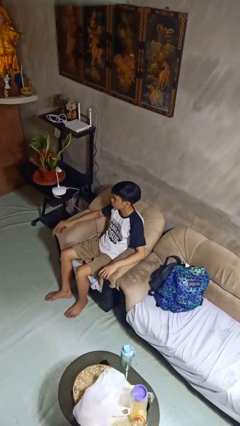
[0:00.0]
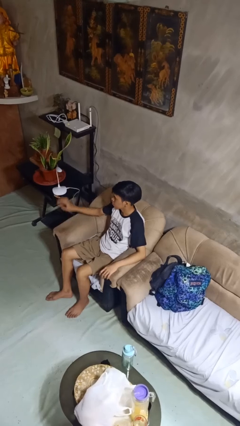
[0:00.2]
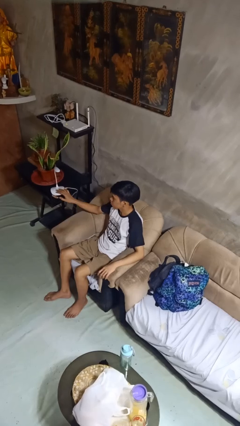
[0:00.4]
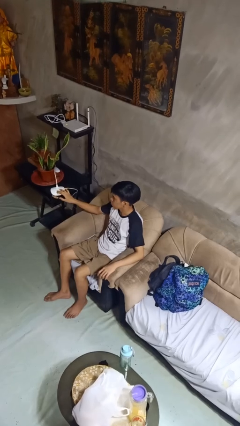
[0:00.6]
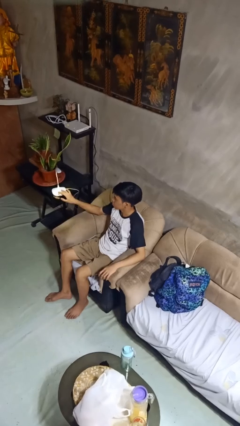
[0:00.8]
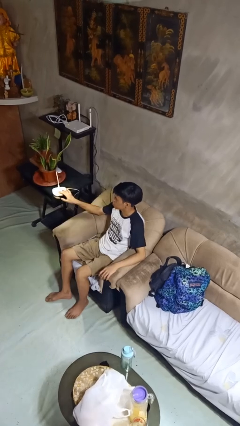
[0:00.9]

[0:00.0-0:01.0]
person turns on lamp

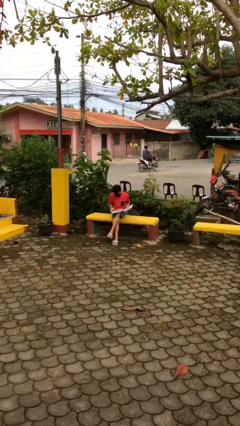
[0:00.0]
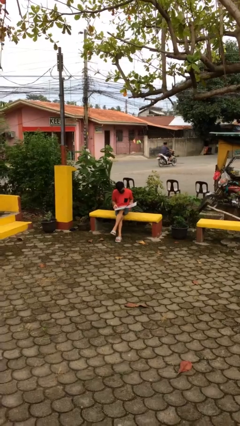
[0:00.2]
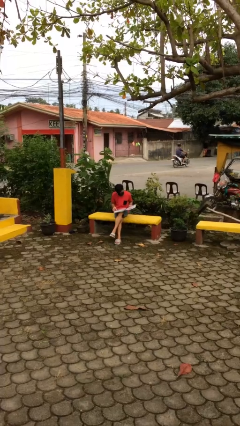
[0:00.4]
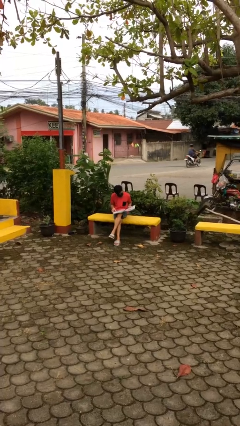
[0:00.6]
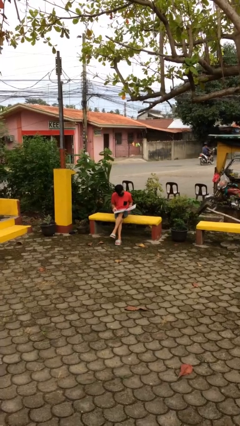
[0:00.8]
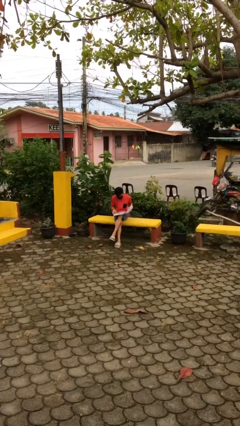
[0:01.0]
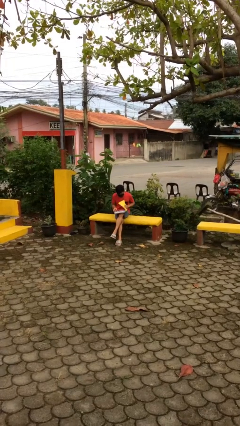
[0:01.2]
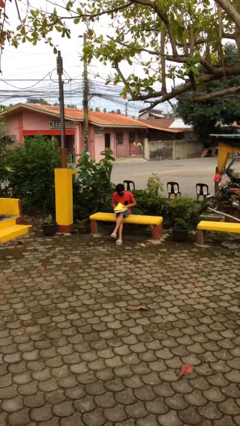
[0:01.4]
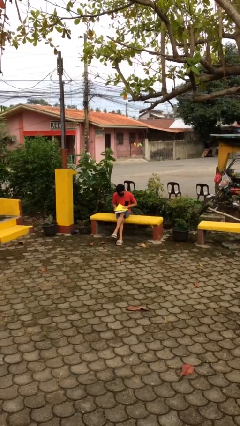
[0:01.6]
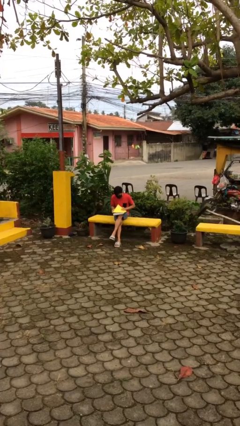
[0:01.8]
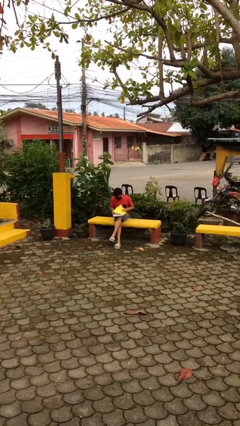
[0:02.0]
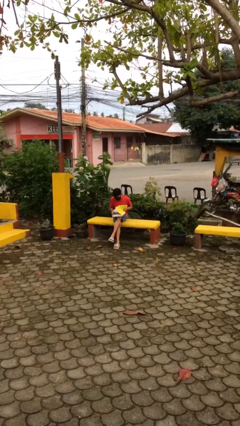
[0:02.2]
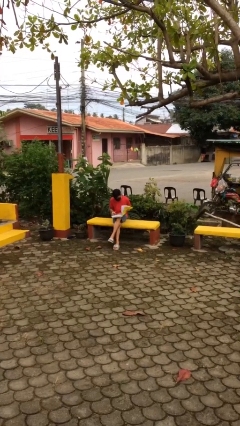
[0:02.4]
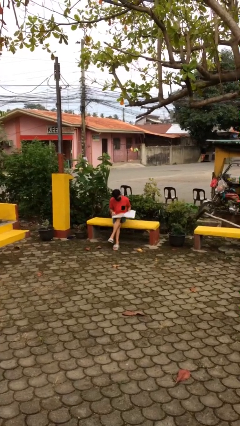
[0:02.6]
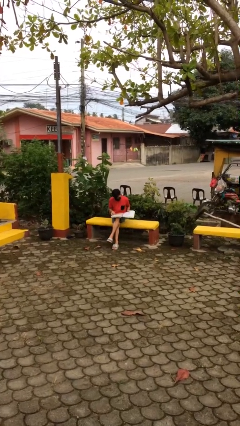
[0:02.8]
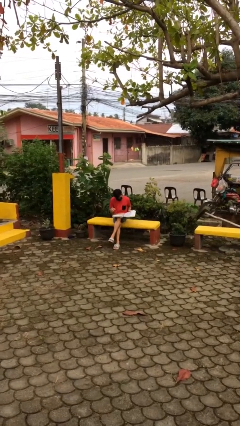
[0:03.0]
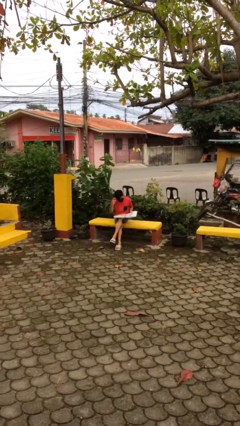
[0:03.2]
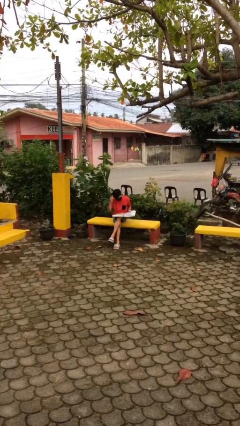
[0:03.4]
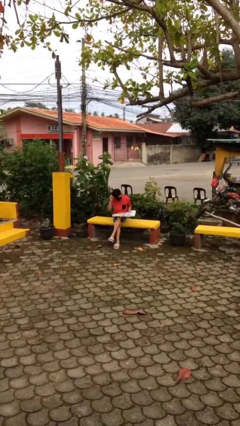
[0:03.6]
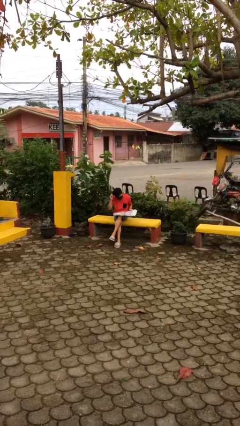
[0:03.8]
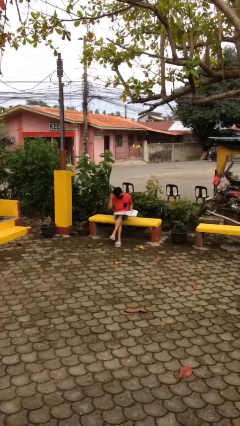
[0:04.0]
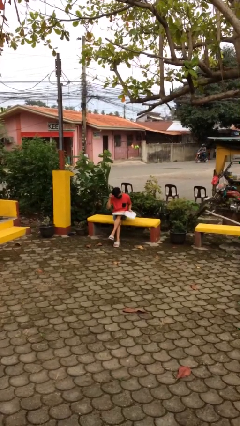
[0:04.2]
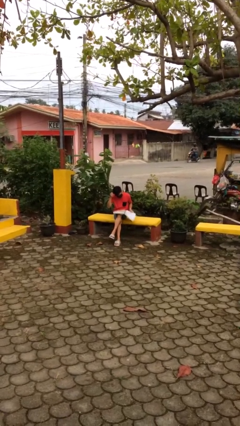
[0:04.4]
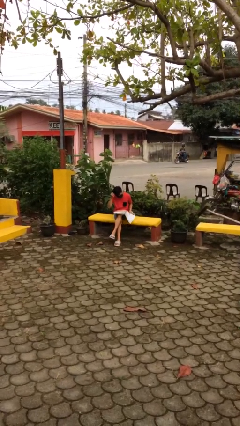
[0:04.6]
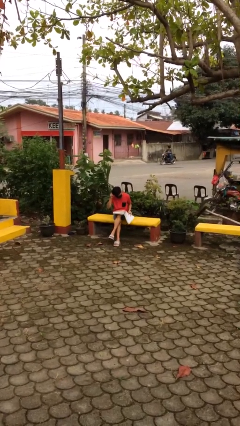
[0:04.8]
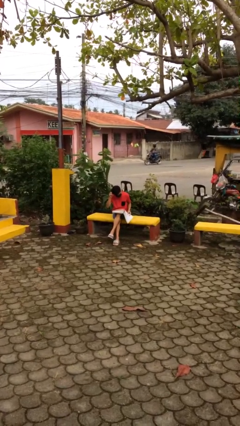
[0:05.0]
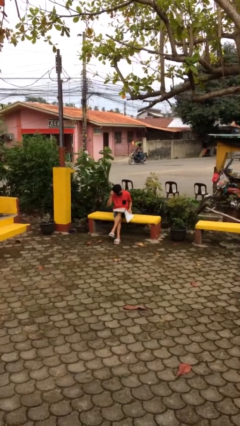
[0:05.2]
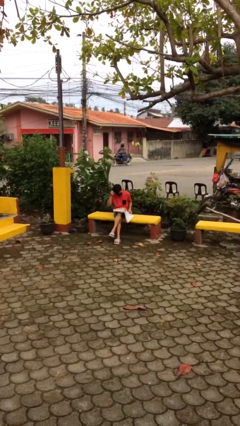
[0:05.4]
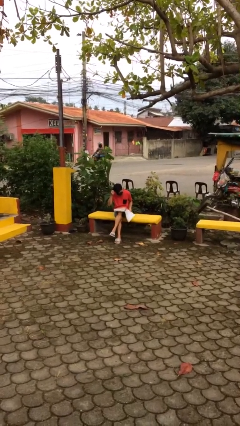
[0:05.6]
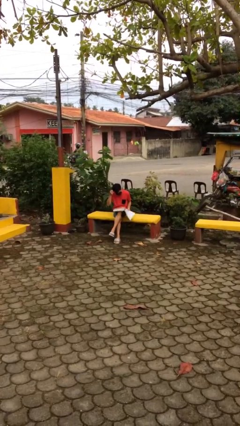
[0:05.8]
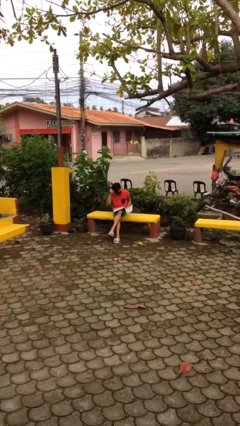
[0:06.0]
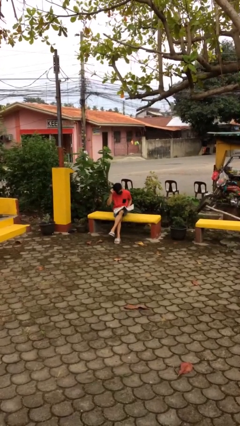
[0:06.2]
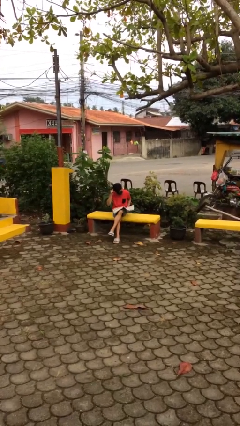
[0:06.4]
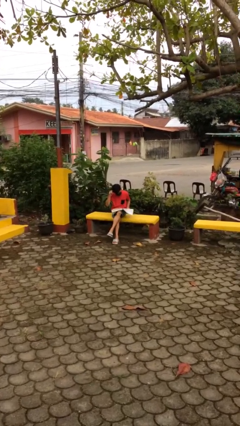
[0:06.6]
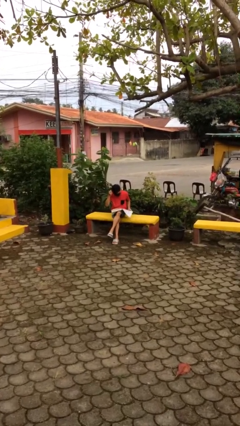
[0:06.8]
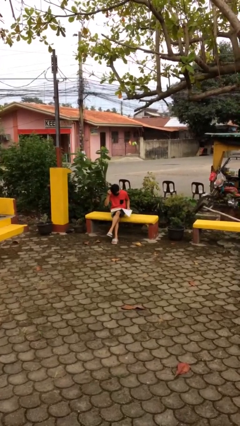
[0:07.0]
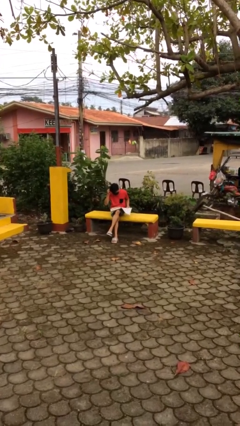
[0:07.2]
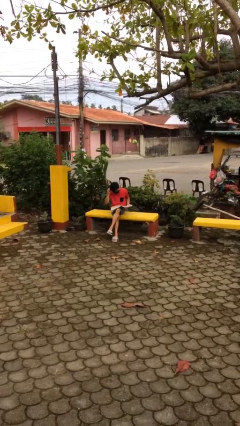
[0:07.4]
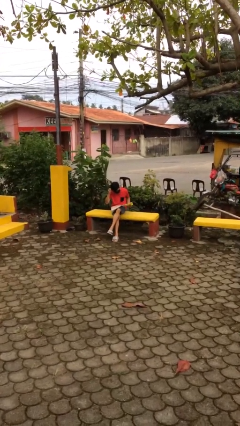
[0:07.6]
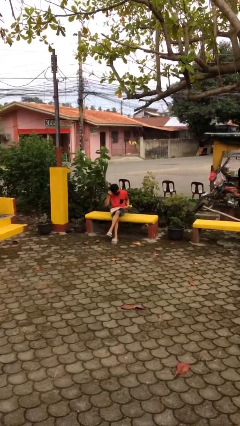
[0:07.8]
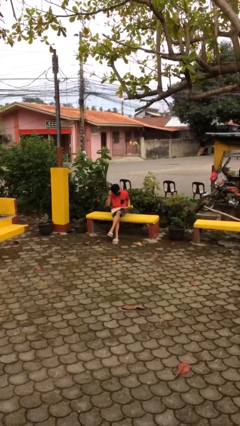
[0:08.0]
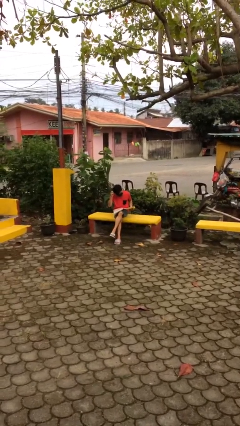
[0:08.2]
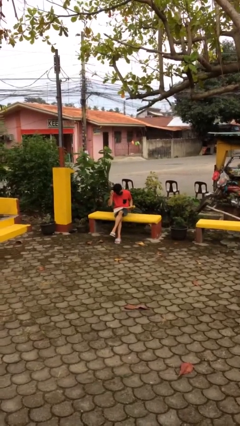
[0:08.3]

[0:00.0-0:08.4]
person reads document

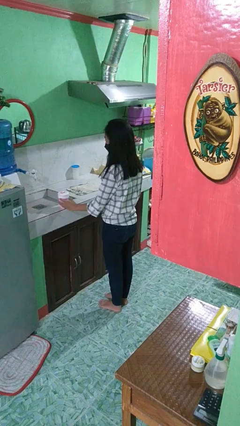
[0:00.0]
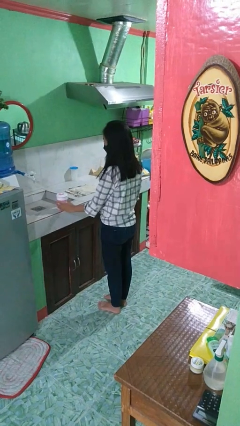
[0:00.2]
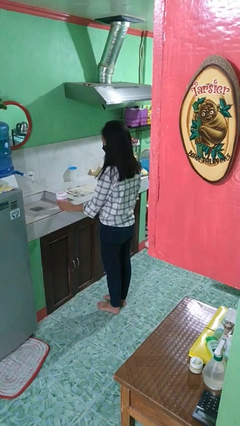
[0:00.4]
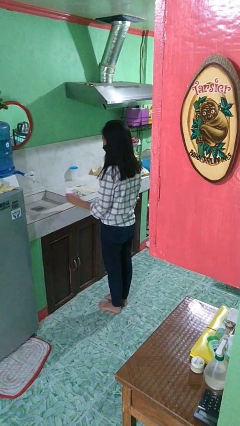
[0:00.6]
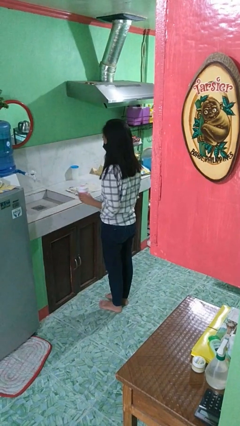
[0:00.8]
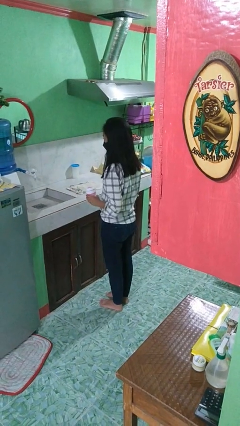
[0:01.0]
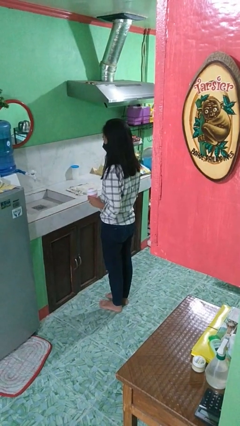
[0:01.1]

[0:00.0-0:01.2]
person picks up object from countertop

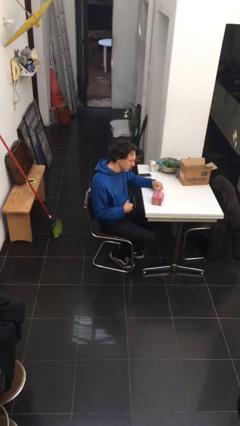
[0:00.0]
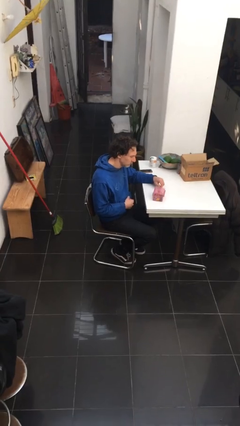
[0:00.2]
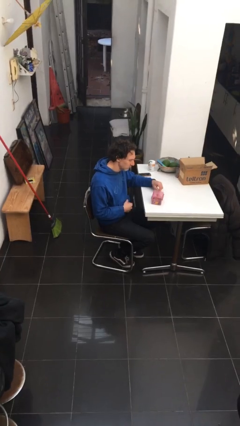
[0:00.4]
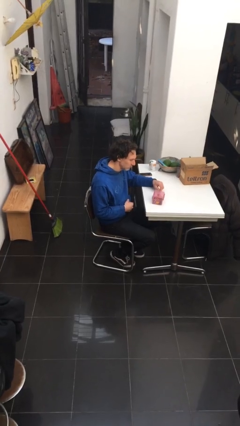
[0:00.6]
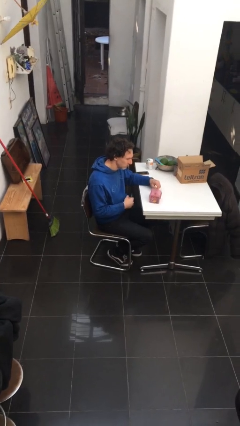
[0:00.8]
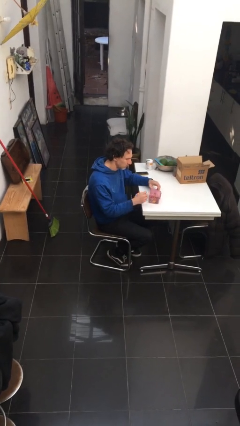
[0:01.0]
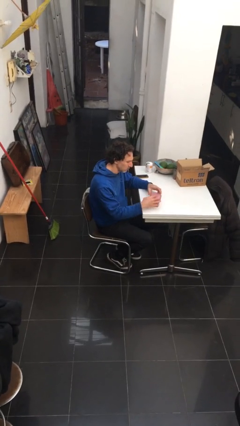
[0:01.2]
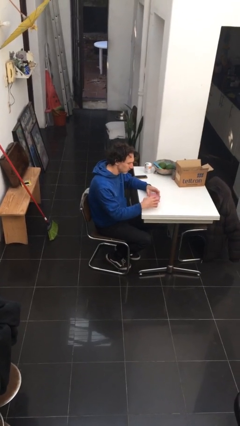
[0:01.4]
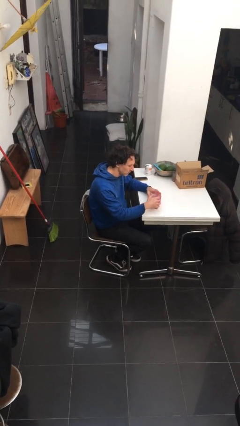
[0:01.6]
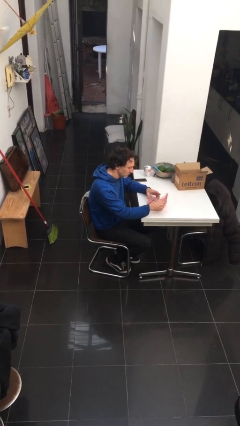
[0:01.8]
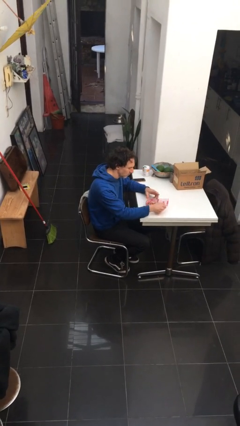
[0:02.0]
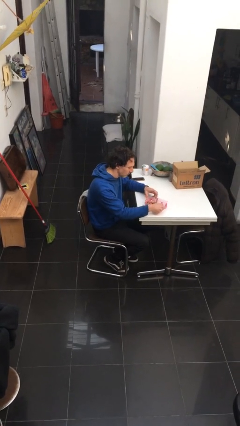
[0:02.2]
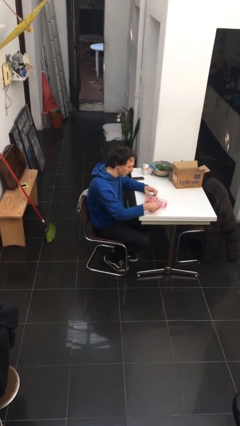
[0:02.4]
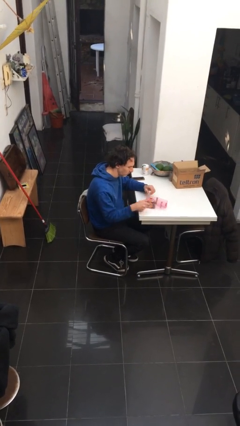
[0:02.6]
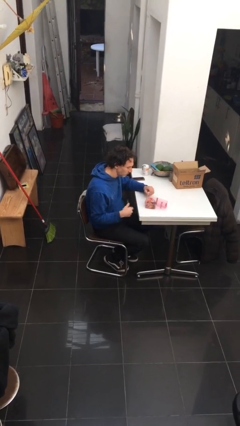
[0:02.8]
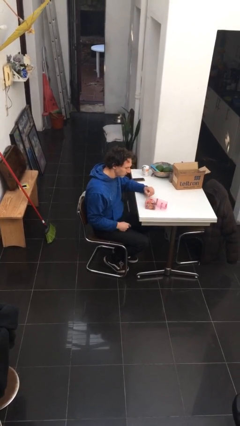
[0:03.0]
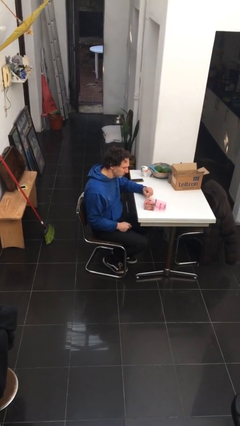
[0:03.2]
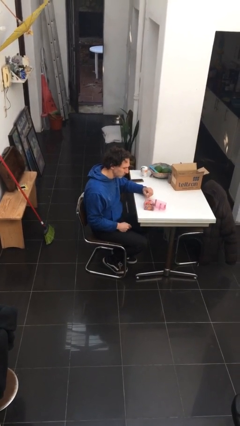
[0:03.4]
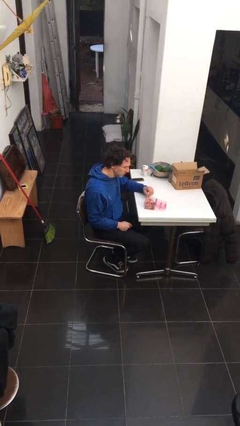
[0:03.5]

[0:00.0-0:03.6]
person opens jewelry box

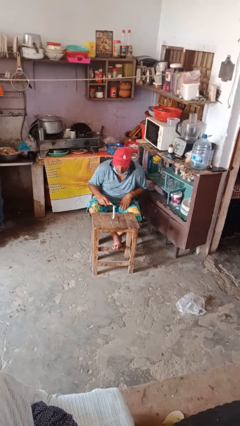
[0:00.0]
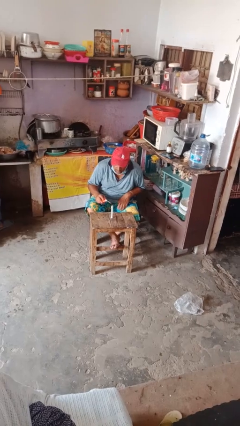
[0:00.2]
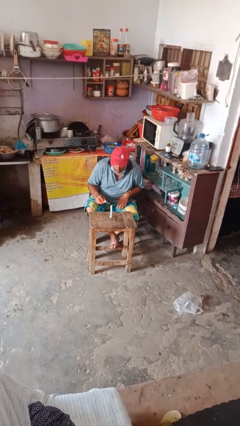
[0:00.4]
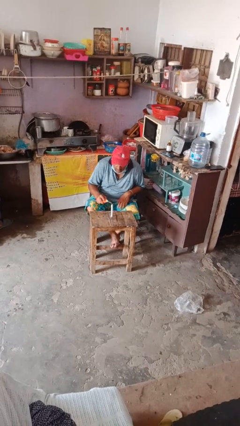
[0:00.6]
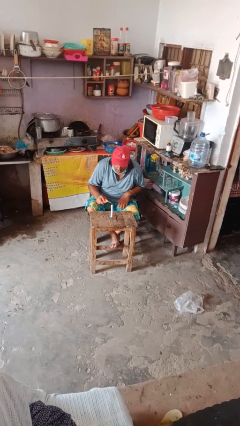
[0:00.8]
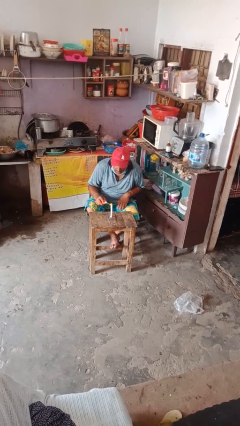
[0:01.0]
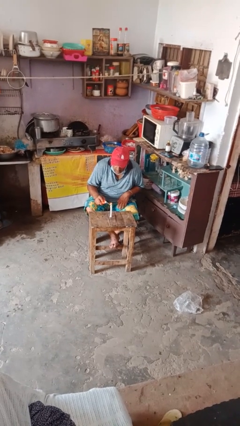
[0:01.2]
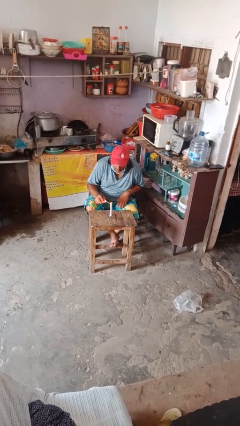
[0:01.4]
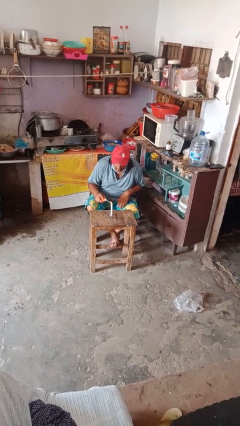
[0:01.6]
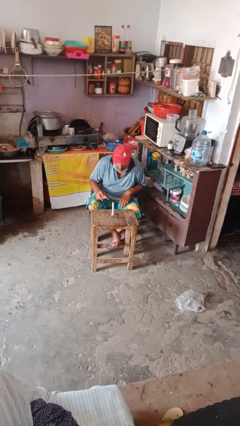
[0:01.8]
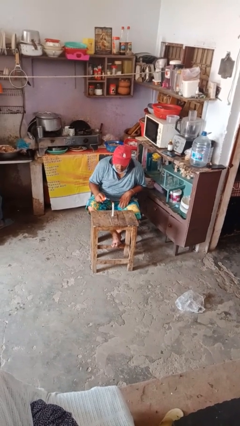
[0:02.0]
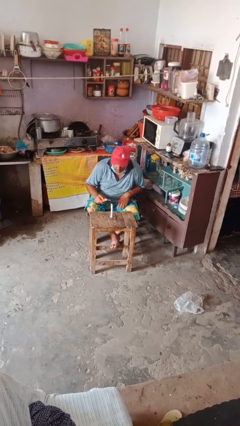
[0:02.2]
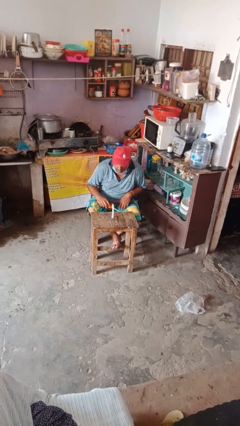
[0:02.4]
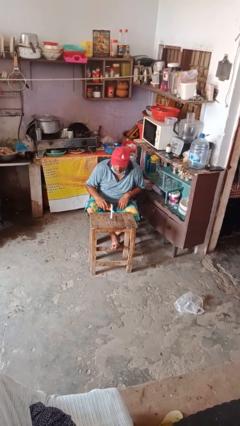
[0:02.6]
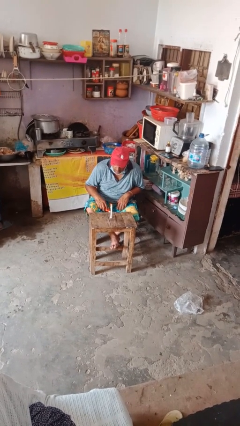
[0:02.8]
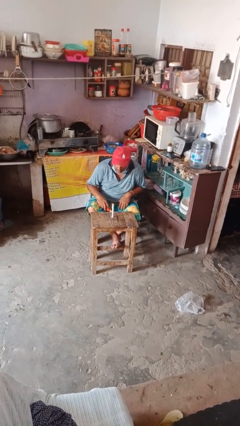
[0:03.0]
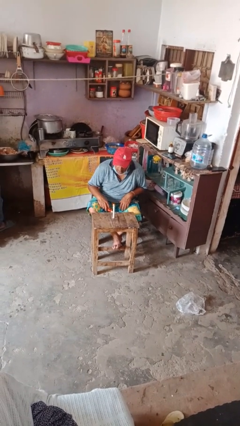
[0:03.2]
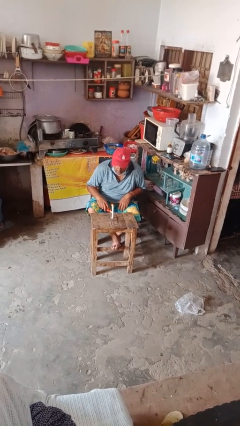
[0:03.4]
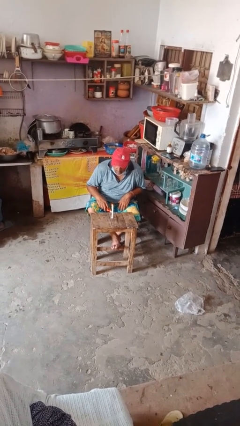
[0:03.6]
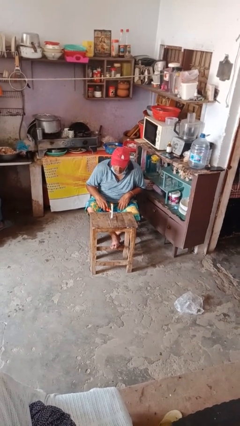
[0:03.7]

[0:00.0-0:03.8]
person lights candle
